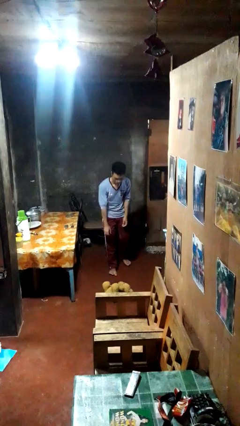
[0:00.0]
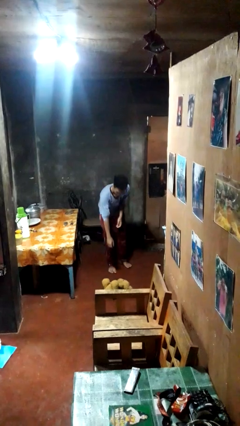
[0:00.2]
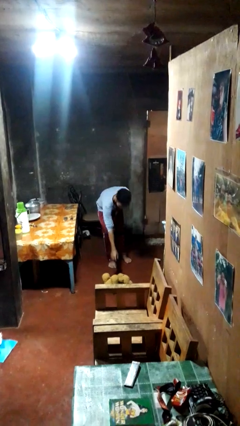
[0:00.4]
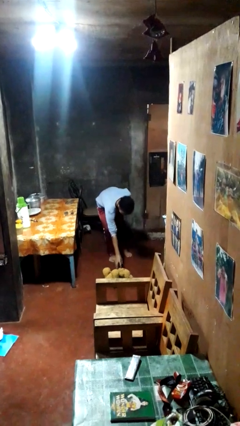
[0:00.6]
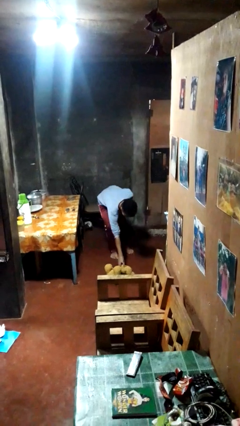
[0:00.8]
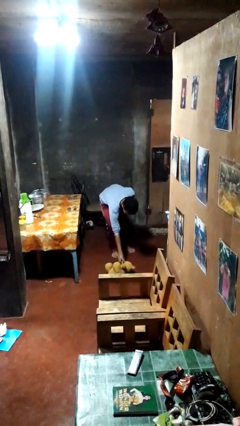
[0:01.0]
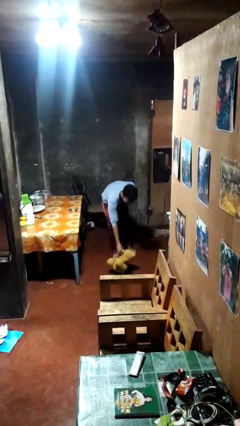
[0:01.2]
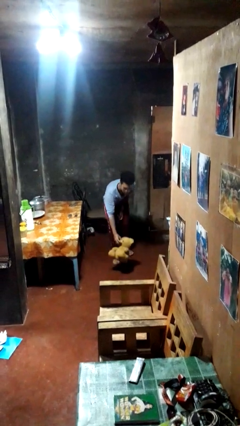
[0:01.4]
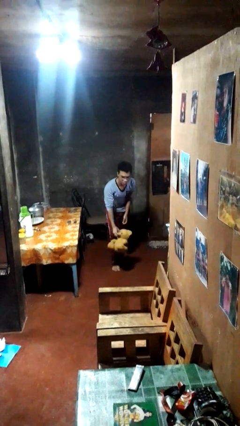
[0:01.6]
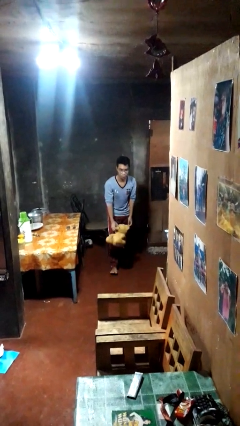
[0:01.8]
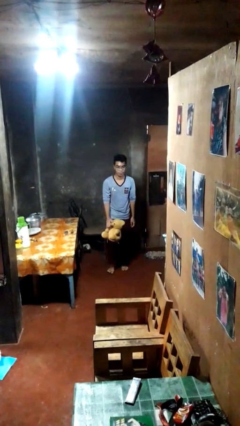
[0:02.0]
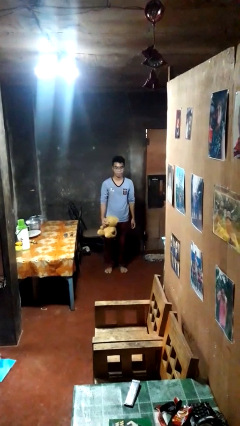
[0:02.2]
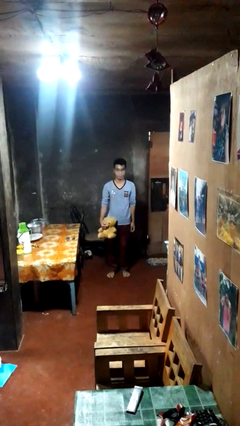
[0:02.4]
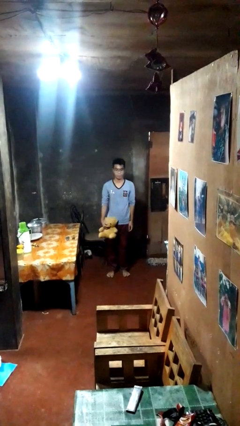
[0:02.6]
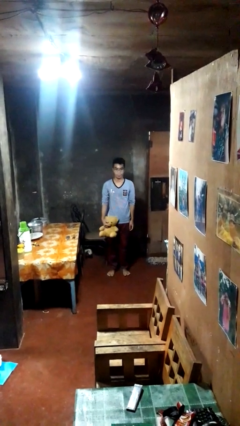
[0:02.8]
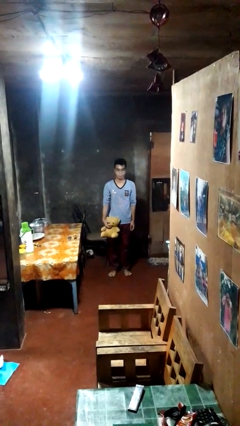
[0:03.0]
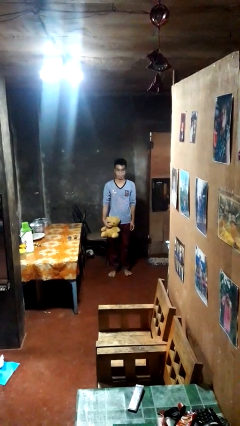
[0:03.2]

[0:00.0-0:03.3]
person picks up object from floor

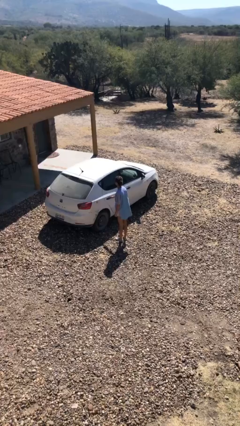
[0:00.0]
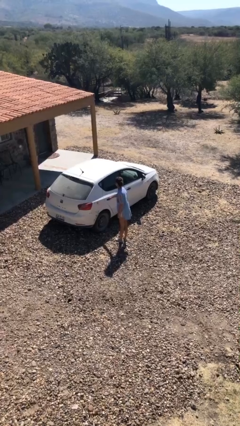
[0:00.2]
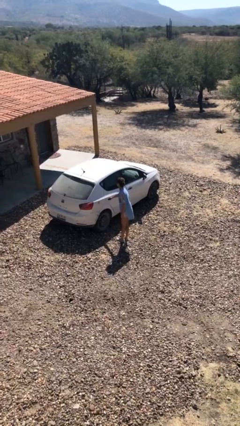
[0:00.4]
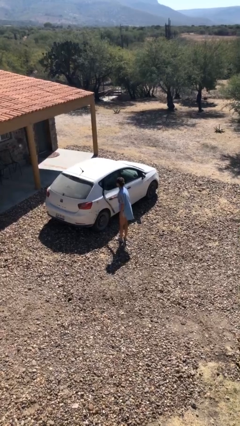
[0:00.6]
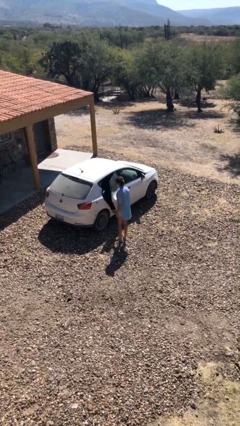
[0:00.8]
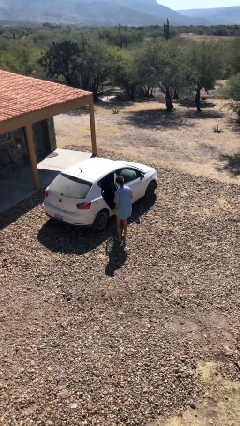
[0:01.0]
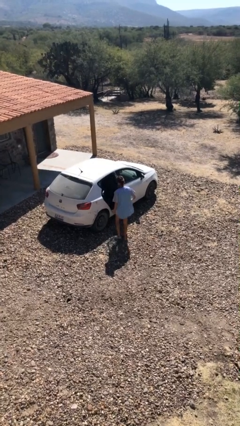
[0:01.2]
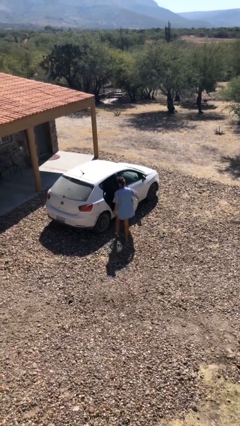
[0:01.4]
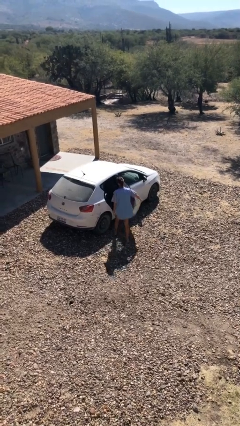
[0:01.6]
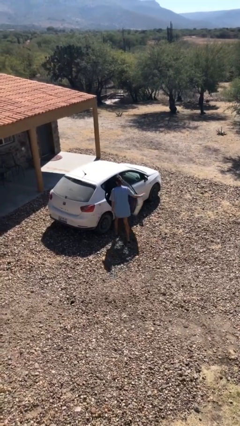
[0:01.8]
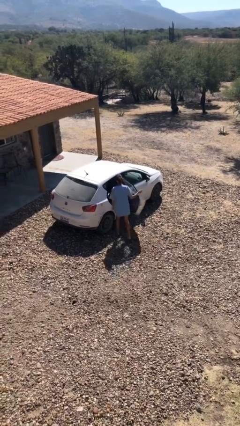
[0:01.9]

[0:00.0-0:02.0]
person opens car door

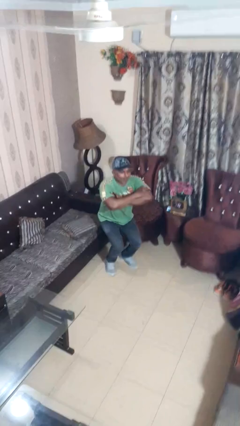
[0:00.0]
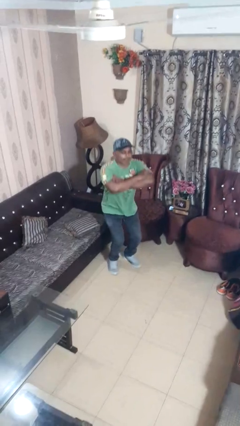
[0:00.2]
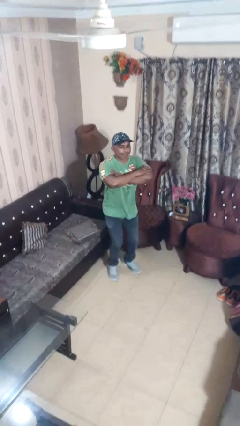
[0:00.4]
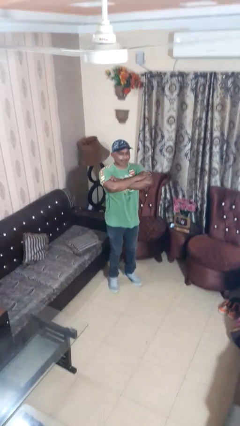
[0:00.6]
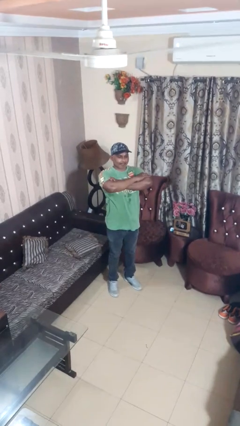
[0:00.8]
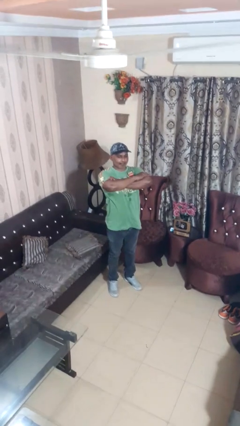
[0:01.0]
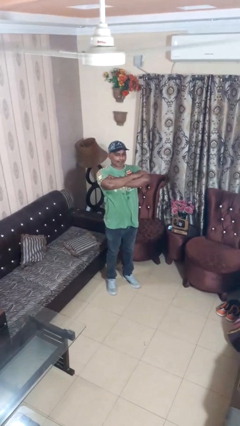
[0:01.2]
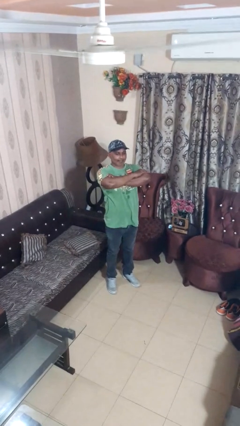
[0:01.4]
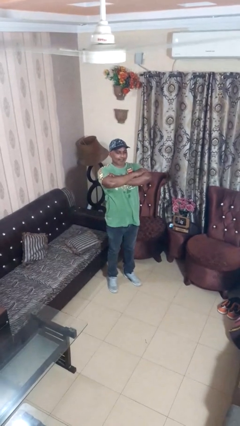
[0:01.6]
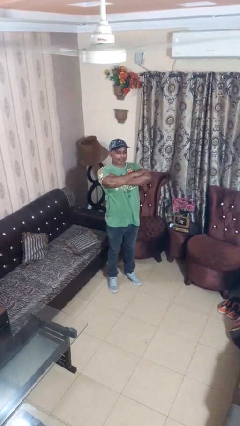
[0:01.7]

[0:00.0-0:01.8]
person stands up

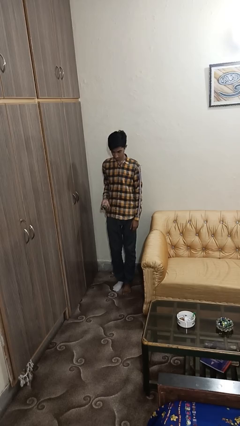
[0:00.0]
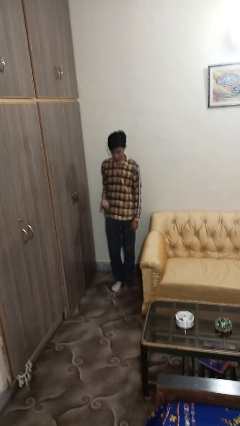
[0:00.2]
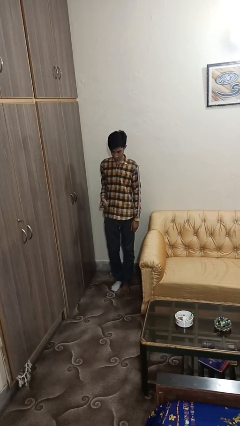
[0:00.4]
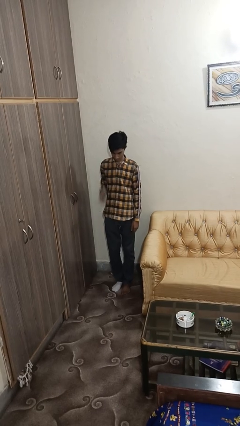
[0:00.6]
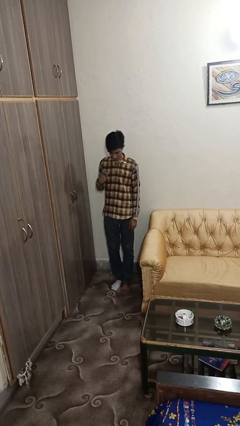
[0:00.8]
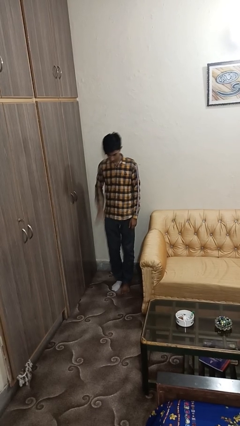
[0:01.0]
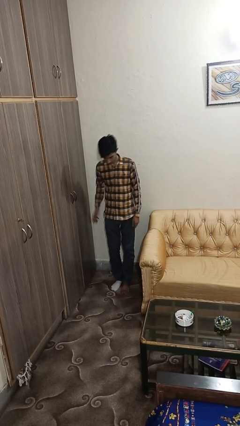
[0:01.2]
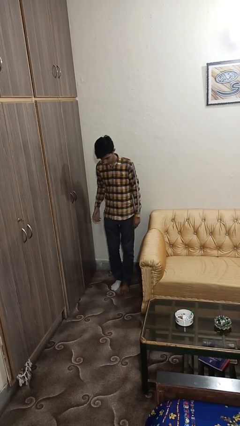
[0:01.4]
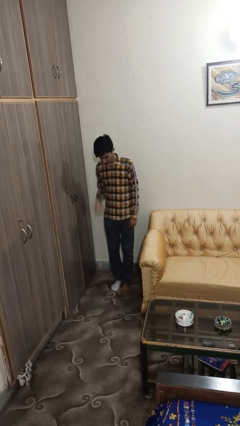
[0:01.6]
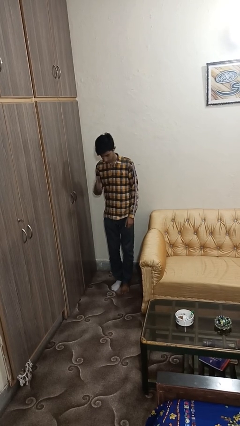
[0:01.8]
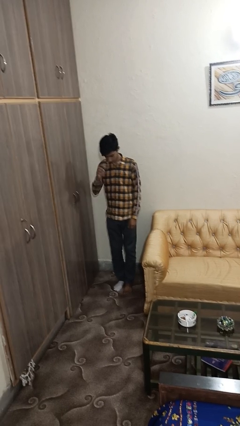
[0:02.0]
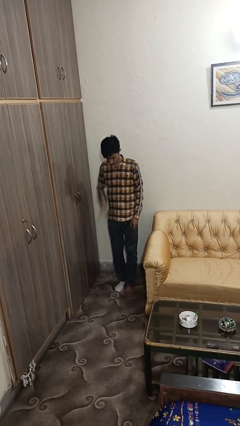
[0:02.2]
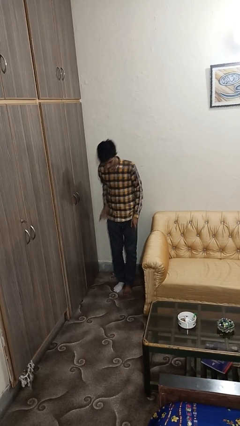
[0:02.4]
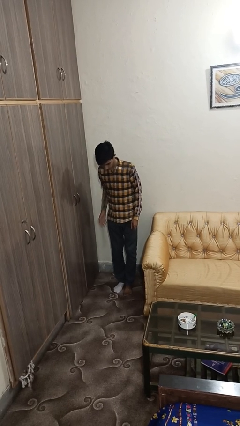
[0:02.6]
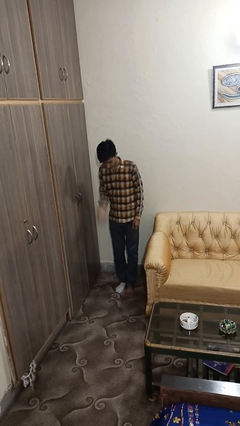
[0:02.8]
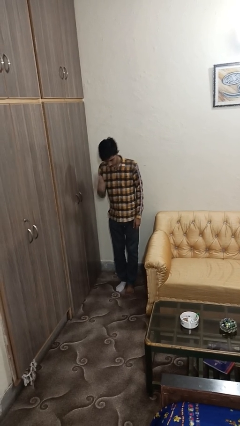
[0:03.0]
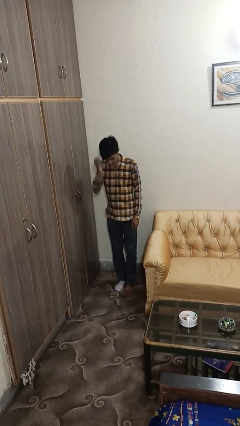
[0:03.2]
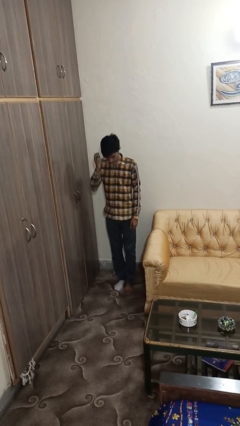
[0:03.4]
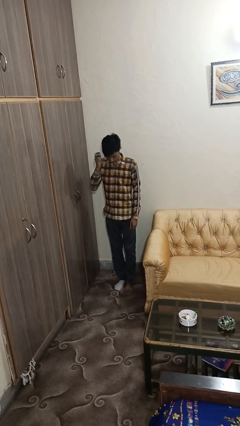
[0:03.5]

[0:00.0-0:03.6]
person bounces ball on floor

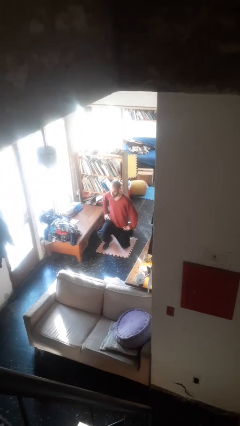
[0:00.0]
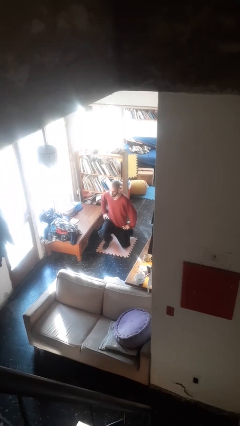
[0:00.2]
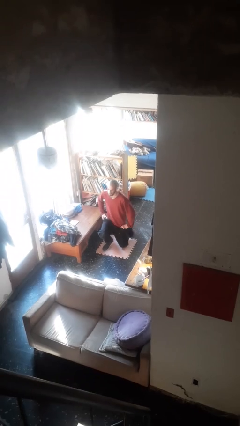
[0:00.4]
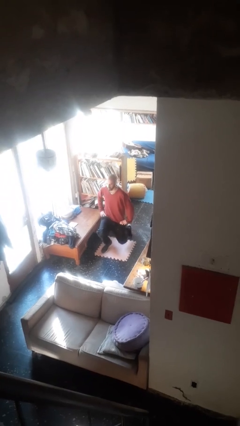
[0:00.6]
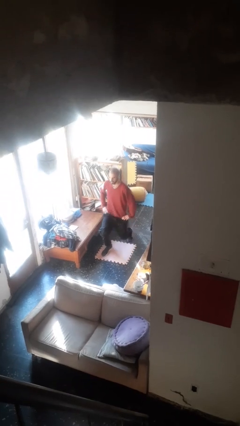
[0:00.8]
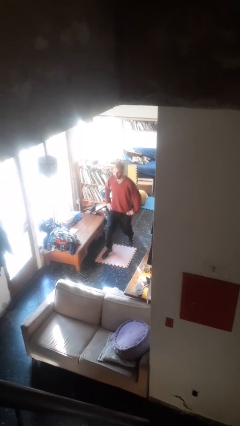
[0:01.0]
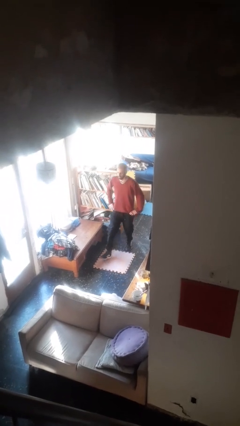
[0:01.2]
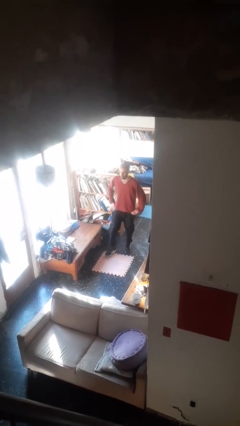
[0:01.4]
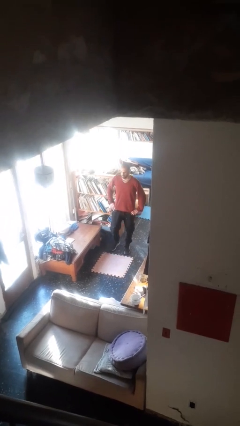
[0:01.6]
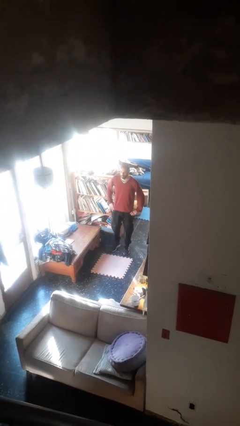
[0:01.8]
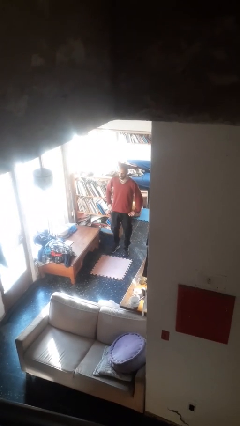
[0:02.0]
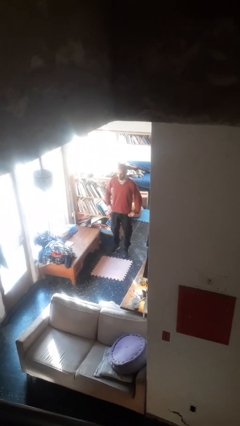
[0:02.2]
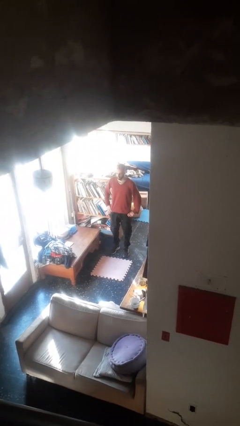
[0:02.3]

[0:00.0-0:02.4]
person stands up from floor

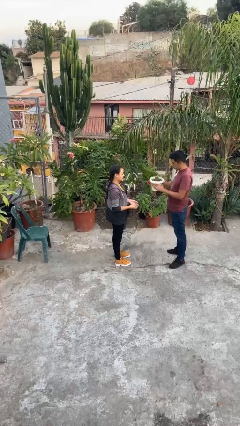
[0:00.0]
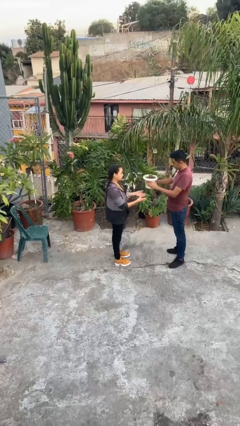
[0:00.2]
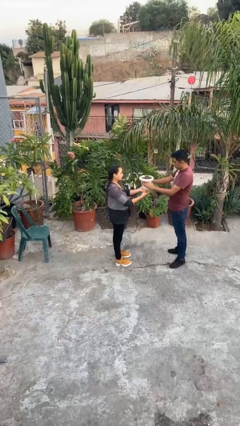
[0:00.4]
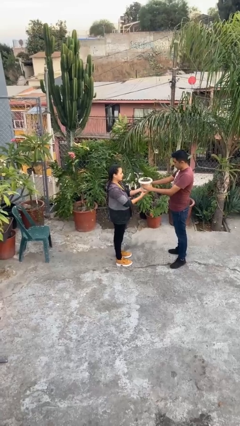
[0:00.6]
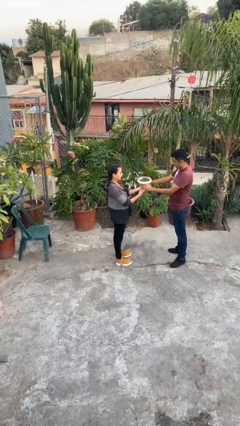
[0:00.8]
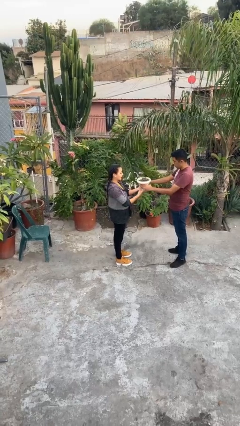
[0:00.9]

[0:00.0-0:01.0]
person transfers object to person

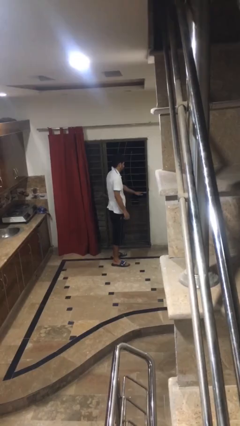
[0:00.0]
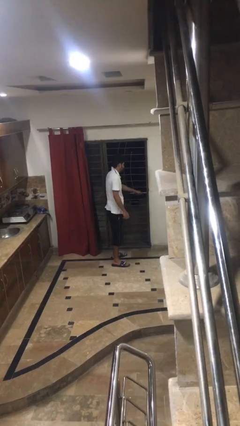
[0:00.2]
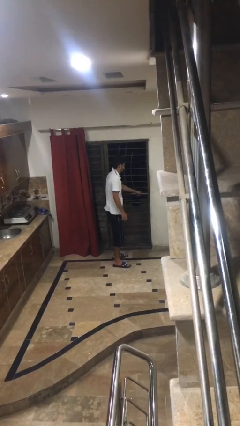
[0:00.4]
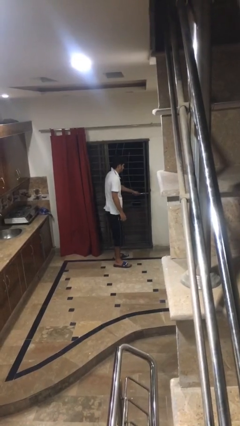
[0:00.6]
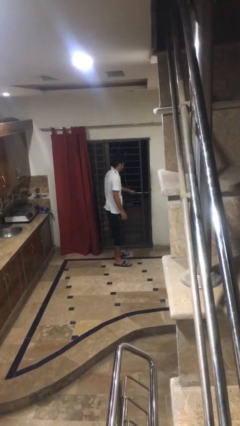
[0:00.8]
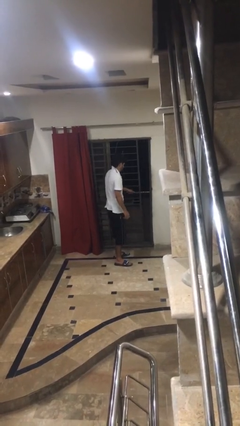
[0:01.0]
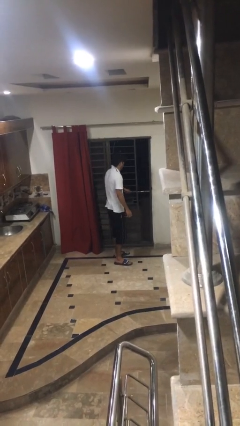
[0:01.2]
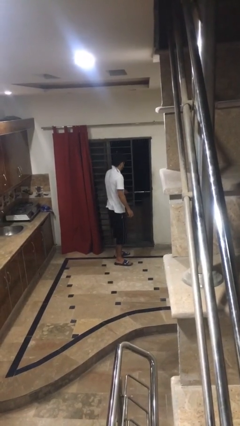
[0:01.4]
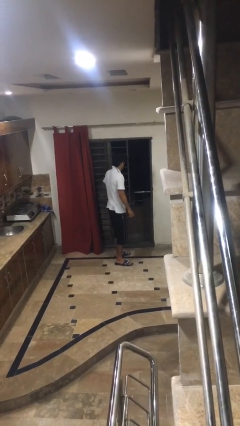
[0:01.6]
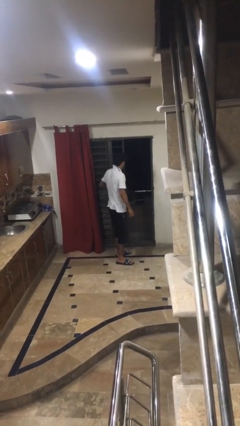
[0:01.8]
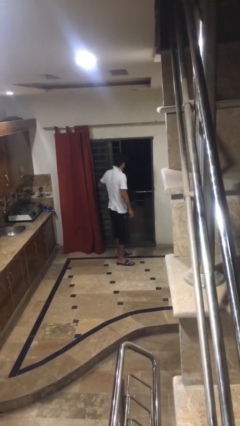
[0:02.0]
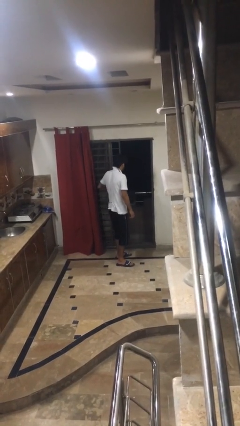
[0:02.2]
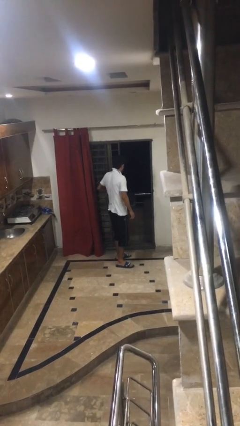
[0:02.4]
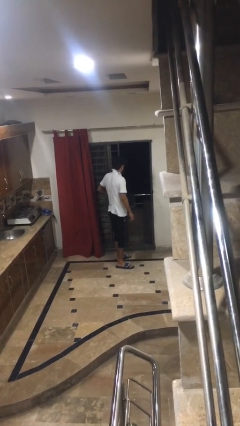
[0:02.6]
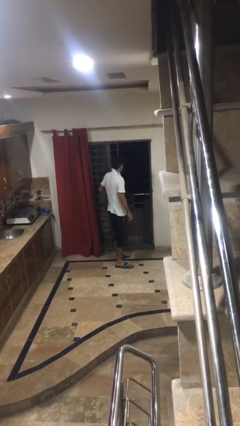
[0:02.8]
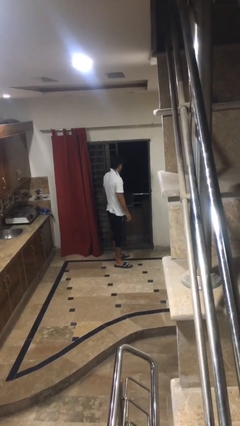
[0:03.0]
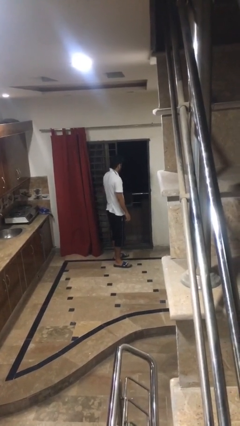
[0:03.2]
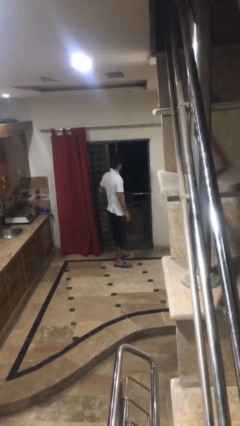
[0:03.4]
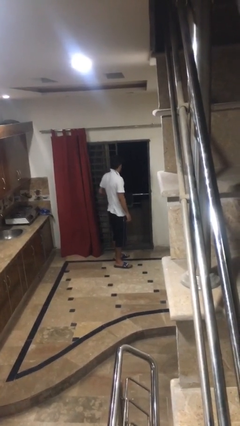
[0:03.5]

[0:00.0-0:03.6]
person opens facility door
